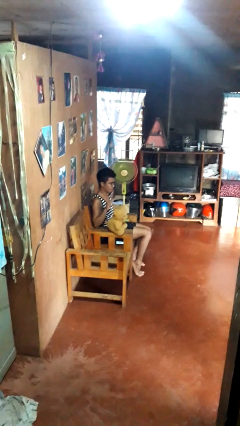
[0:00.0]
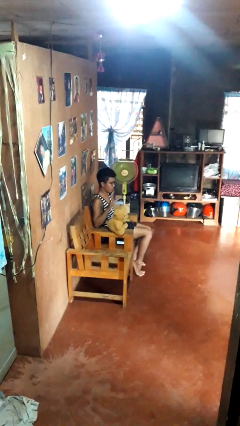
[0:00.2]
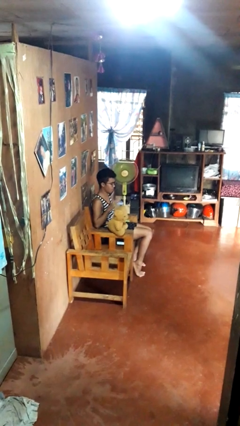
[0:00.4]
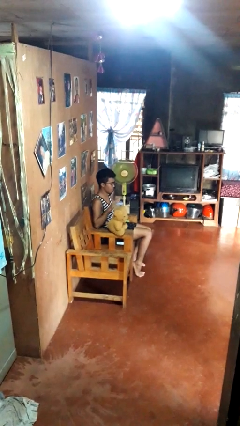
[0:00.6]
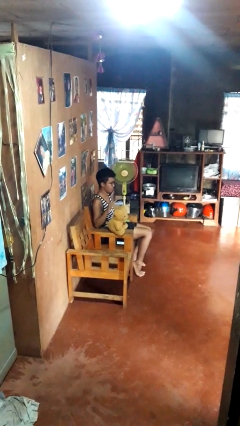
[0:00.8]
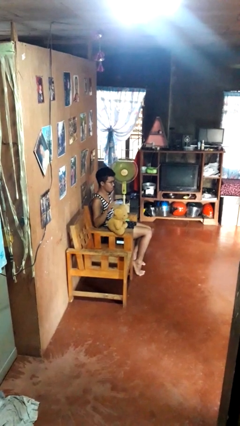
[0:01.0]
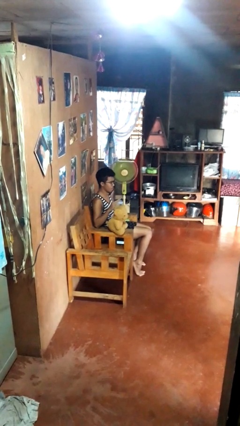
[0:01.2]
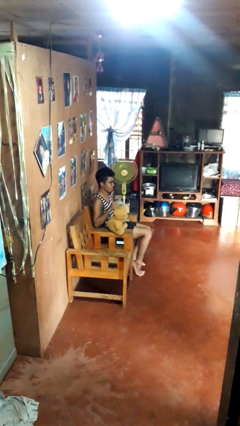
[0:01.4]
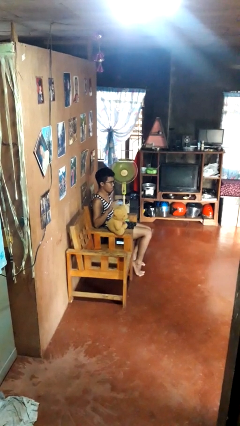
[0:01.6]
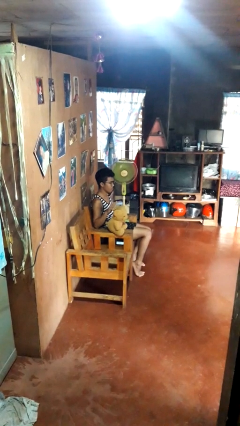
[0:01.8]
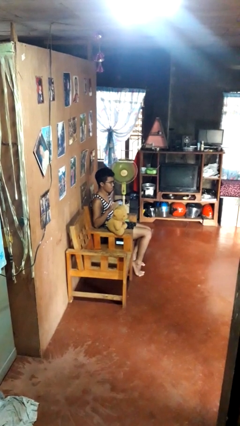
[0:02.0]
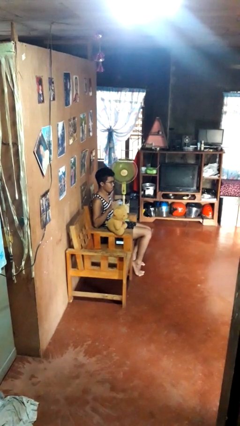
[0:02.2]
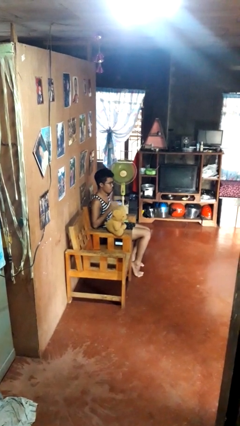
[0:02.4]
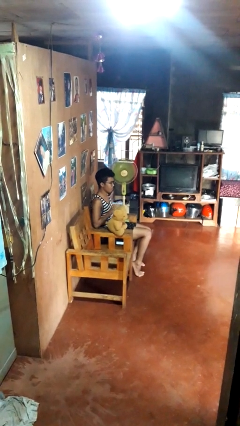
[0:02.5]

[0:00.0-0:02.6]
person waves hand over object

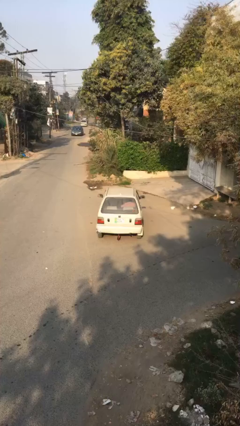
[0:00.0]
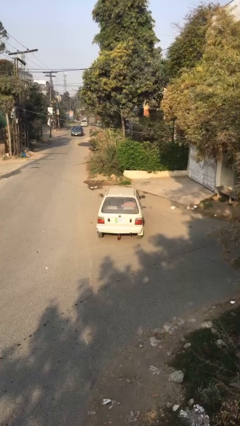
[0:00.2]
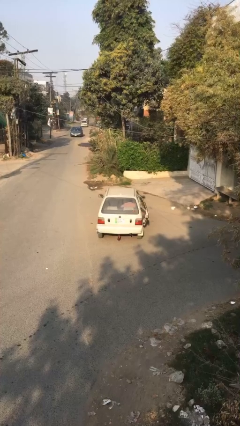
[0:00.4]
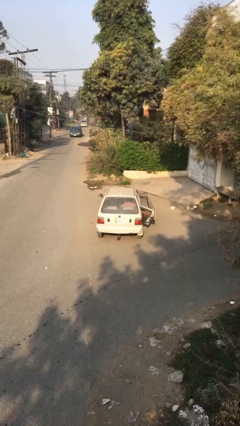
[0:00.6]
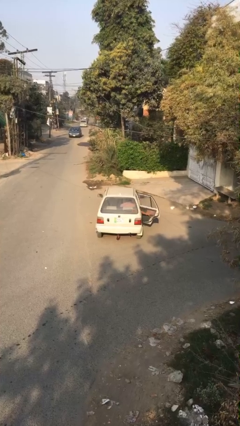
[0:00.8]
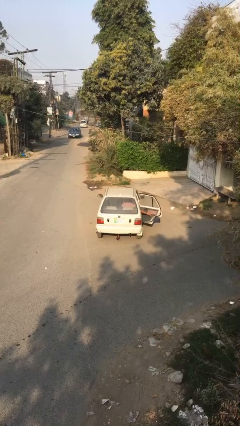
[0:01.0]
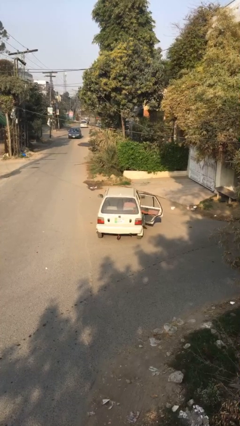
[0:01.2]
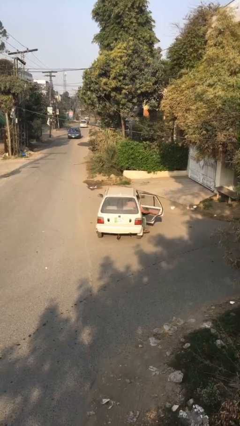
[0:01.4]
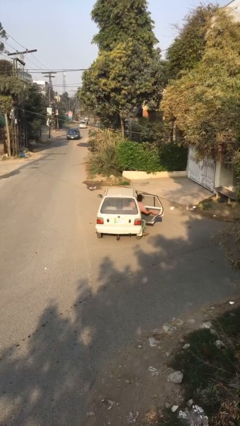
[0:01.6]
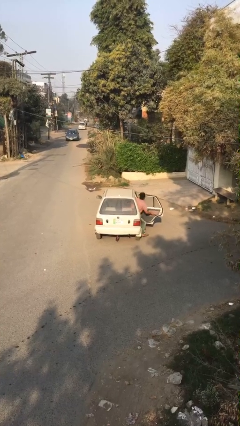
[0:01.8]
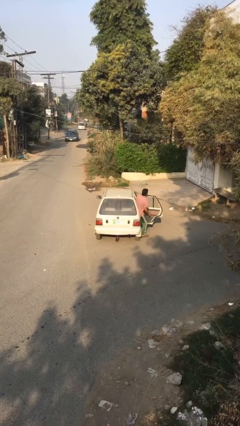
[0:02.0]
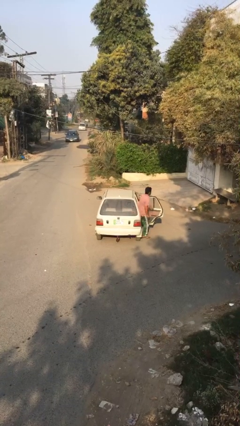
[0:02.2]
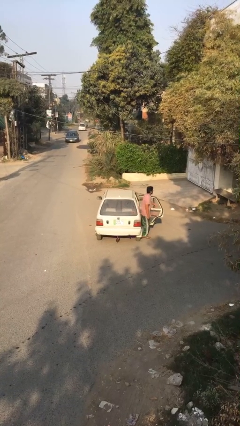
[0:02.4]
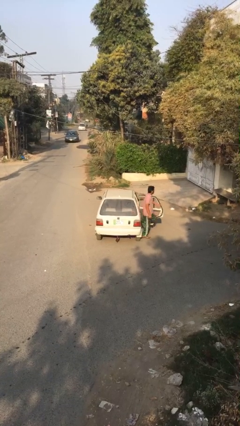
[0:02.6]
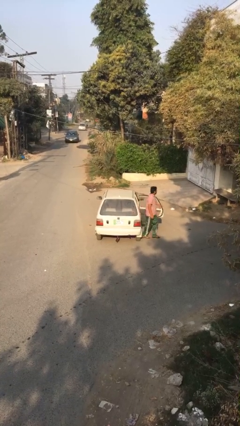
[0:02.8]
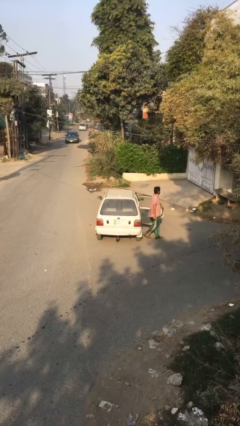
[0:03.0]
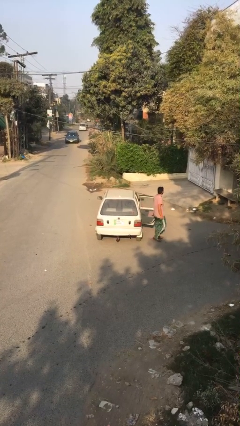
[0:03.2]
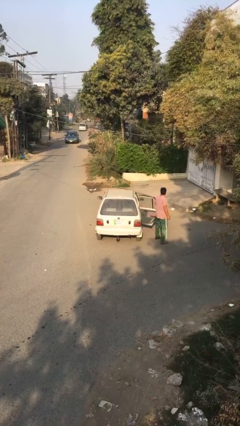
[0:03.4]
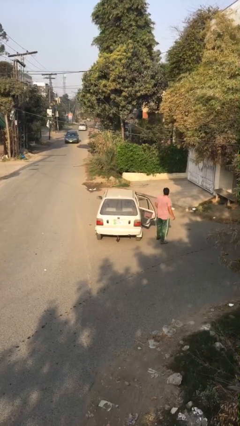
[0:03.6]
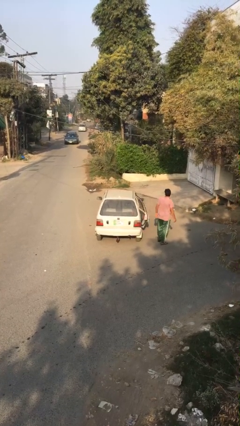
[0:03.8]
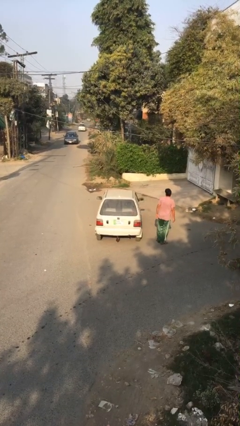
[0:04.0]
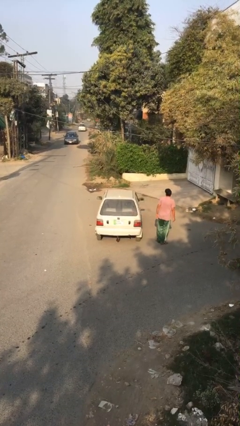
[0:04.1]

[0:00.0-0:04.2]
car drops off person

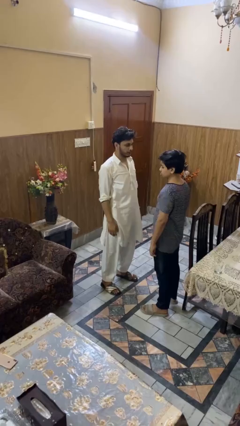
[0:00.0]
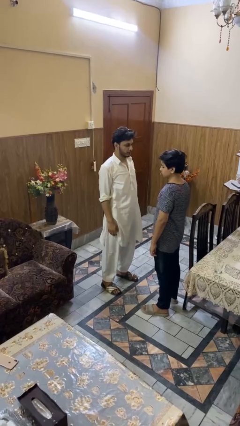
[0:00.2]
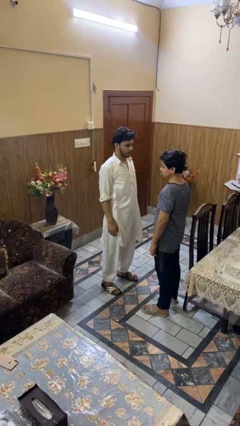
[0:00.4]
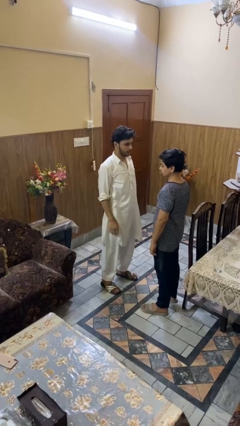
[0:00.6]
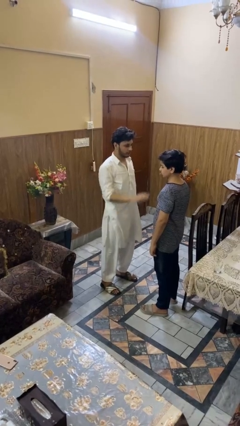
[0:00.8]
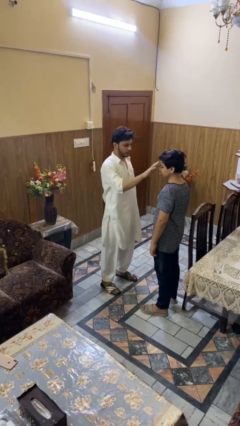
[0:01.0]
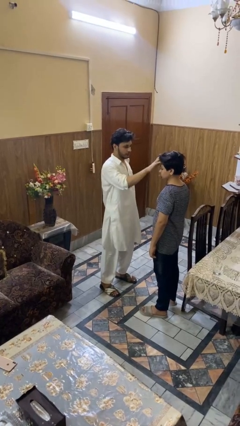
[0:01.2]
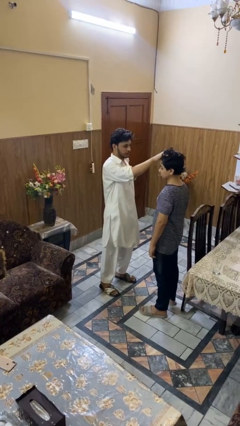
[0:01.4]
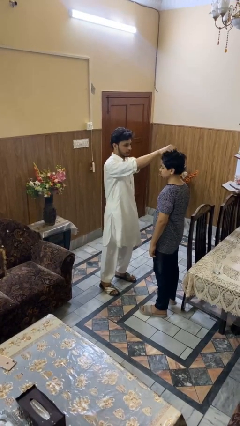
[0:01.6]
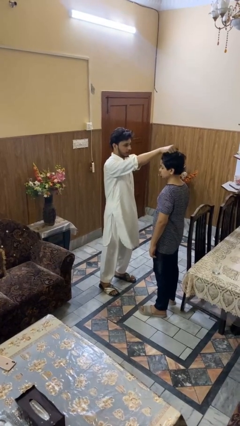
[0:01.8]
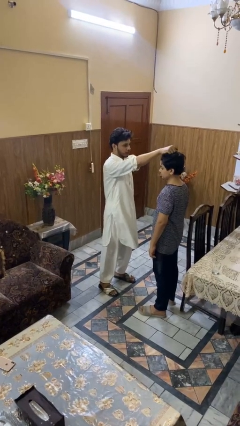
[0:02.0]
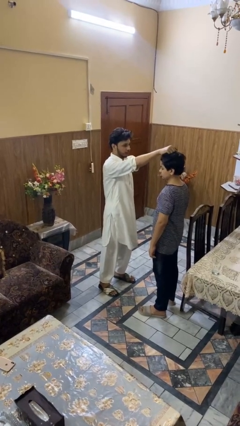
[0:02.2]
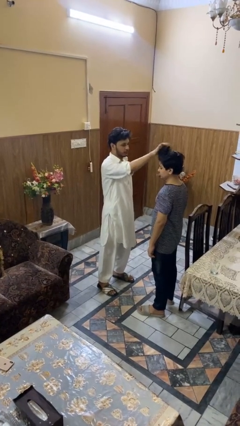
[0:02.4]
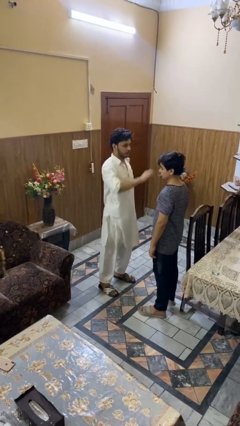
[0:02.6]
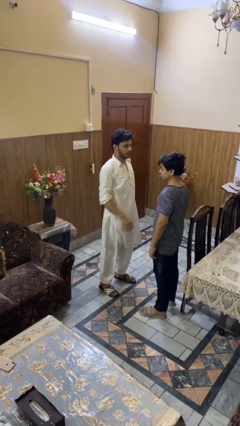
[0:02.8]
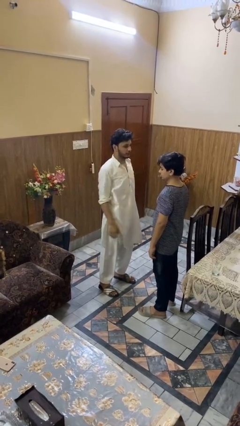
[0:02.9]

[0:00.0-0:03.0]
person grabs person by hair

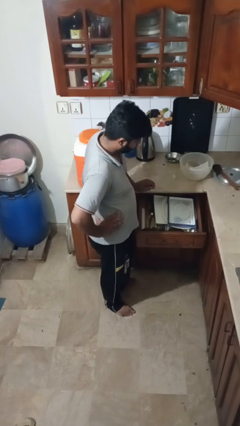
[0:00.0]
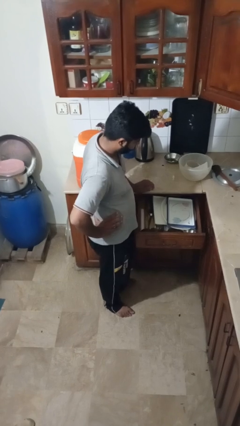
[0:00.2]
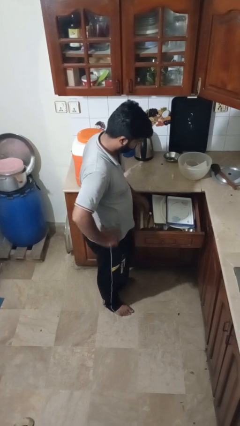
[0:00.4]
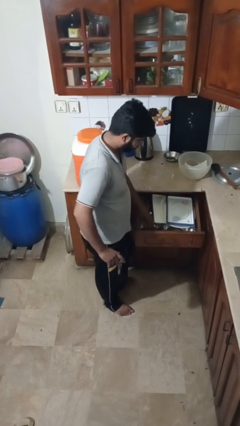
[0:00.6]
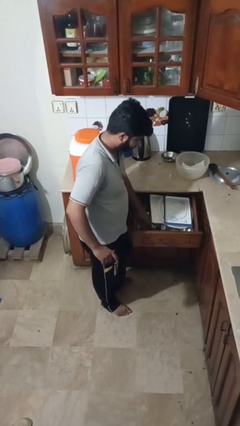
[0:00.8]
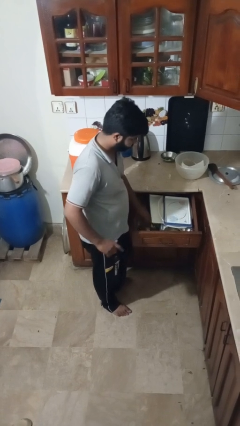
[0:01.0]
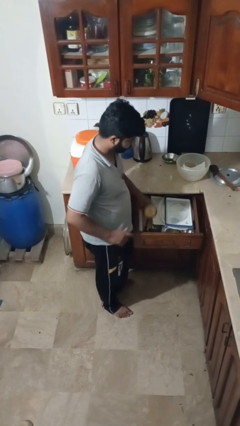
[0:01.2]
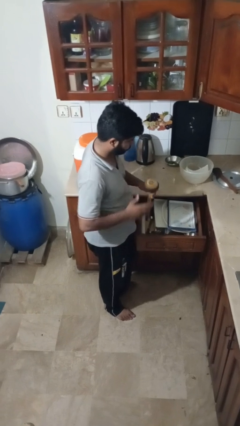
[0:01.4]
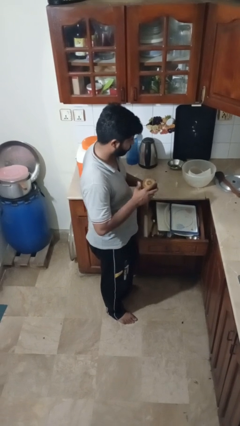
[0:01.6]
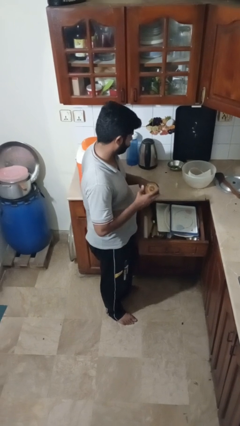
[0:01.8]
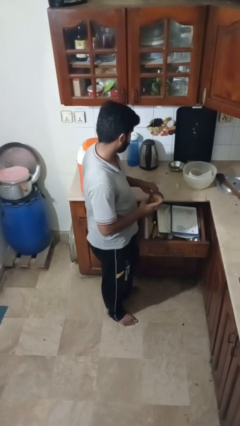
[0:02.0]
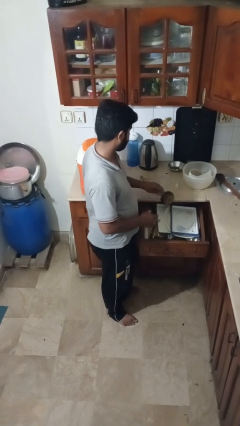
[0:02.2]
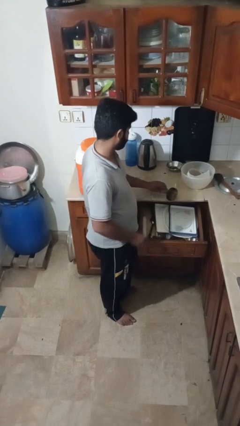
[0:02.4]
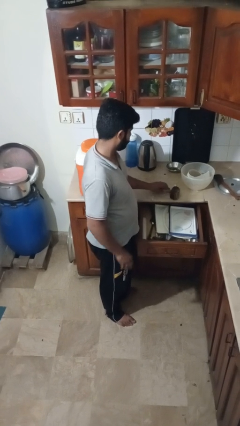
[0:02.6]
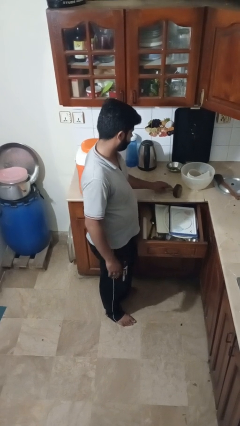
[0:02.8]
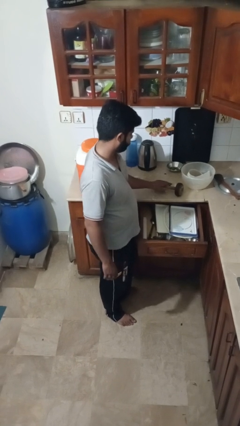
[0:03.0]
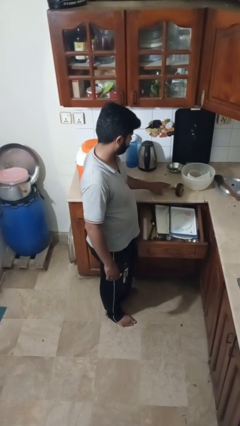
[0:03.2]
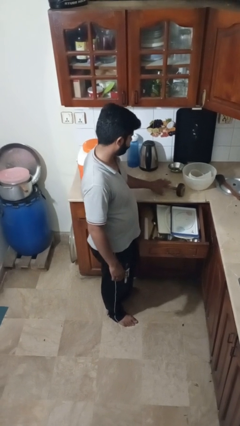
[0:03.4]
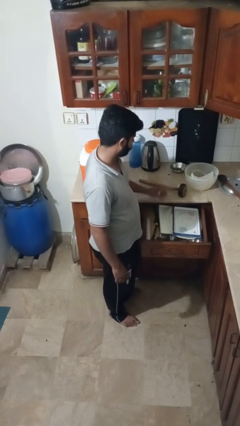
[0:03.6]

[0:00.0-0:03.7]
person takes object from kitchen drawer

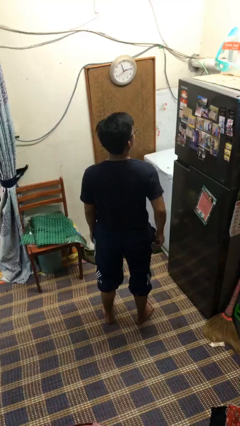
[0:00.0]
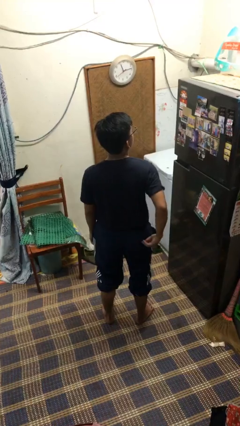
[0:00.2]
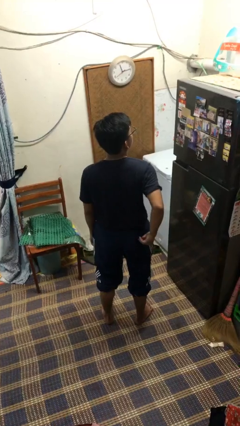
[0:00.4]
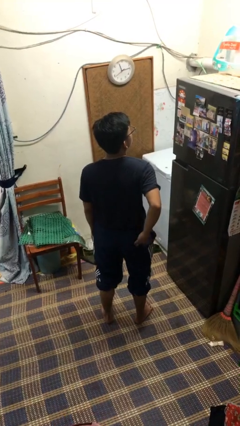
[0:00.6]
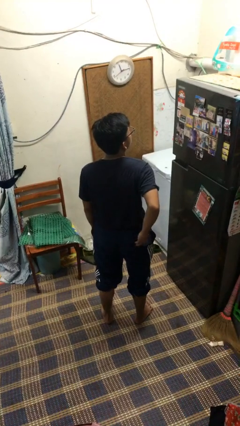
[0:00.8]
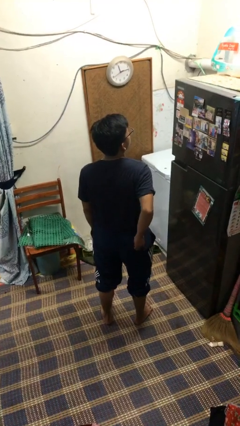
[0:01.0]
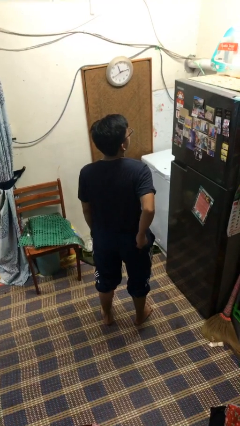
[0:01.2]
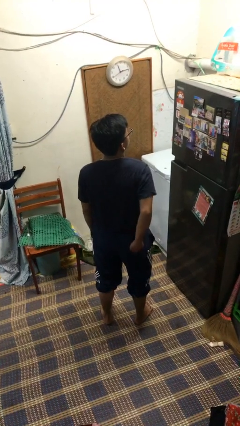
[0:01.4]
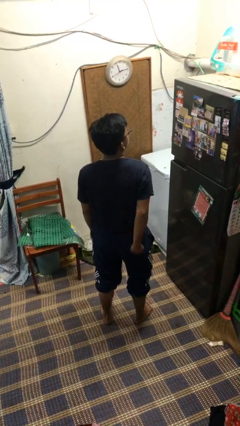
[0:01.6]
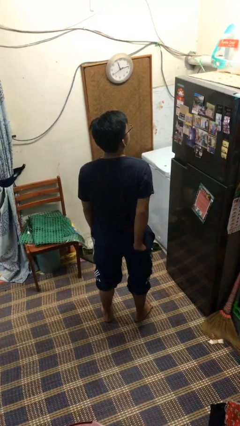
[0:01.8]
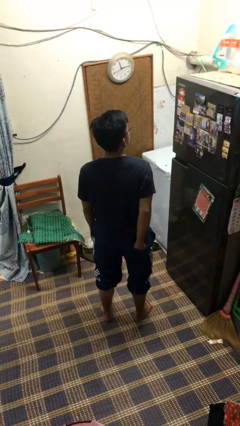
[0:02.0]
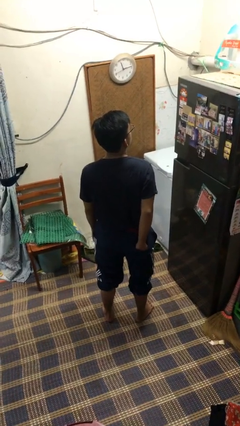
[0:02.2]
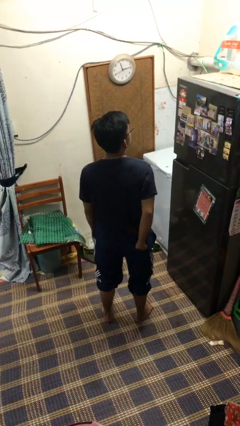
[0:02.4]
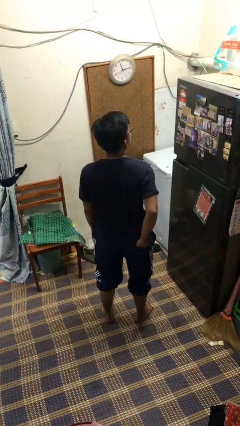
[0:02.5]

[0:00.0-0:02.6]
person puts hands in back pockets

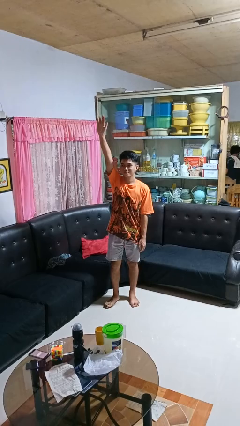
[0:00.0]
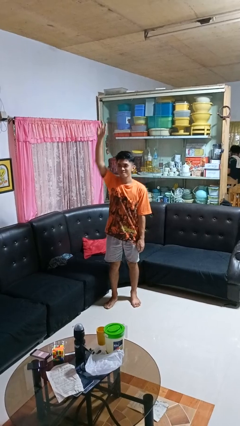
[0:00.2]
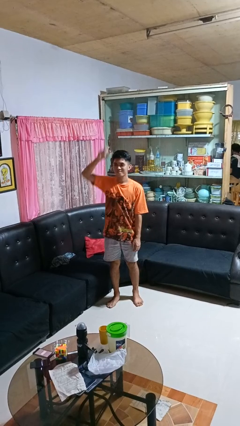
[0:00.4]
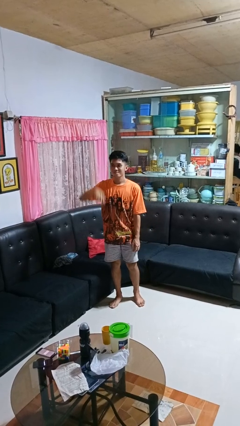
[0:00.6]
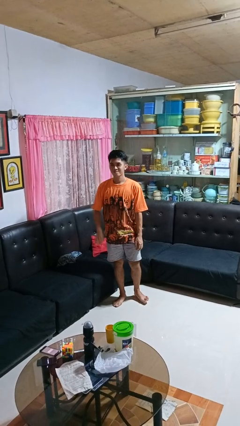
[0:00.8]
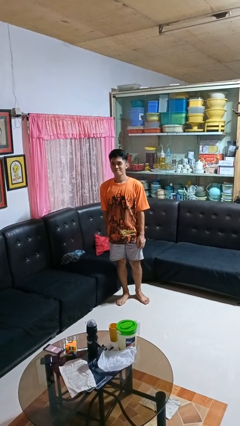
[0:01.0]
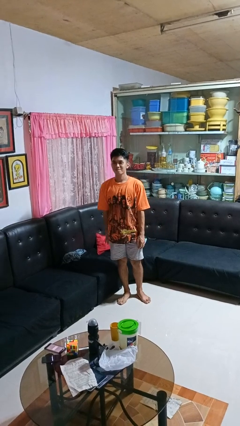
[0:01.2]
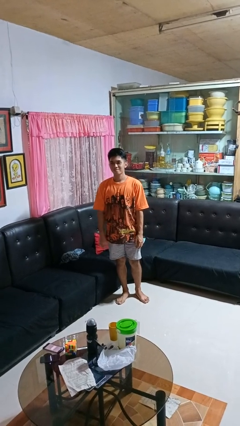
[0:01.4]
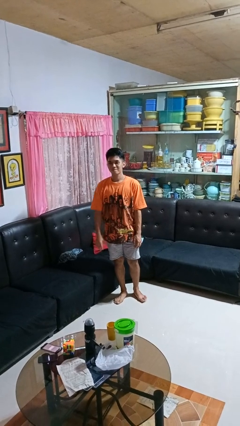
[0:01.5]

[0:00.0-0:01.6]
person gestures lower hand
